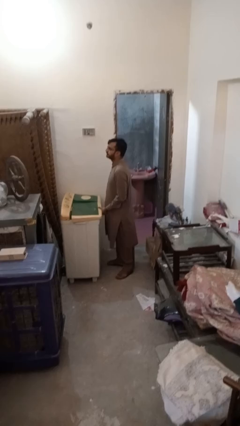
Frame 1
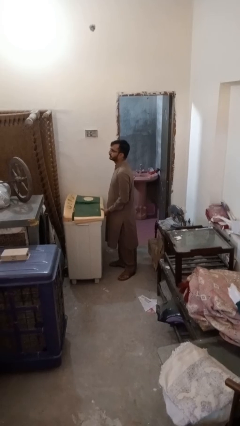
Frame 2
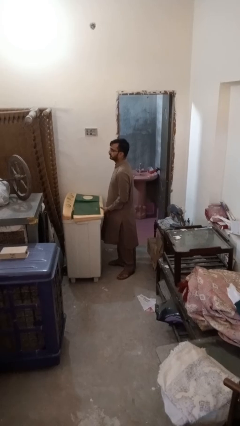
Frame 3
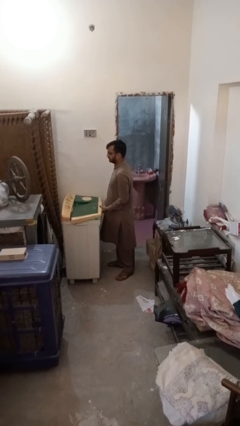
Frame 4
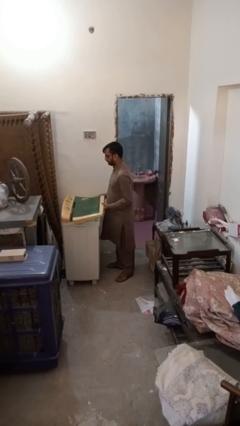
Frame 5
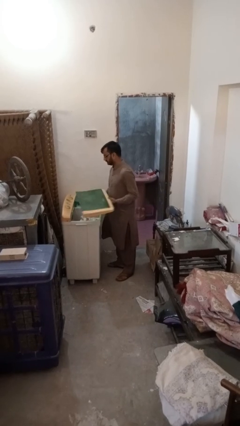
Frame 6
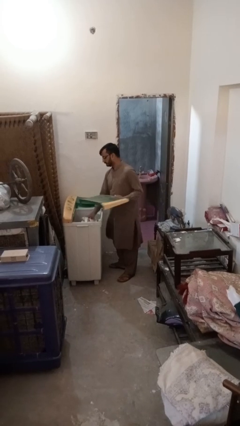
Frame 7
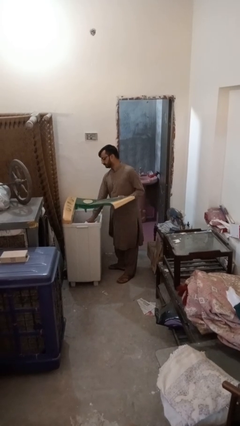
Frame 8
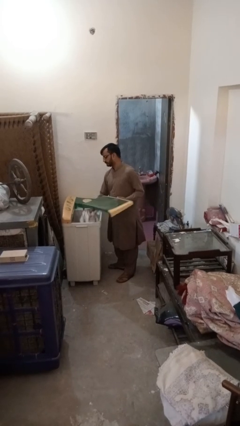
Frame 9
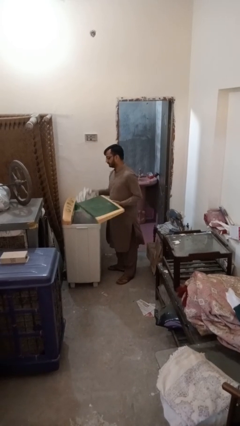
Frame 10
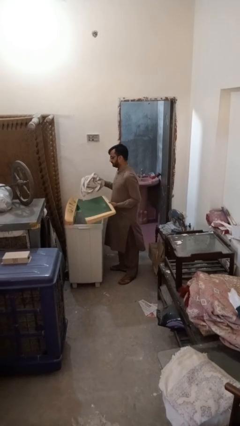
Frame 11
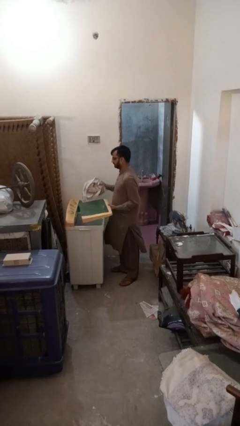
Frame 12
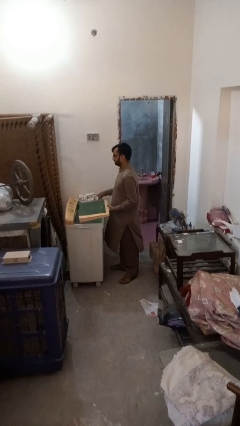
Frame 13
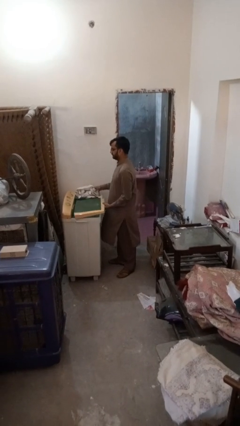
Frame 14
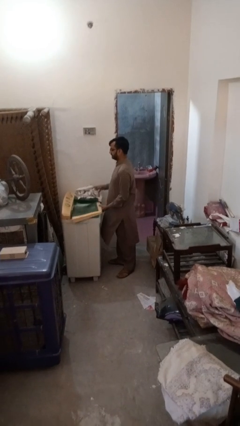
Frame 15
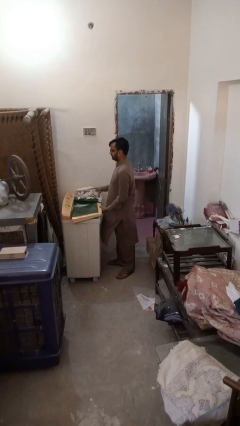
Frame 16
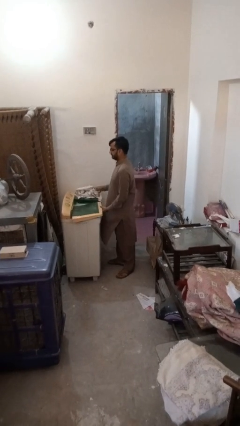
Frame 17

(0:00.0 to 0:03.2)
person unloads clotheswasher

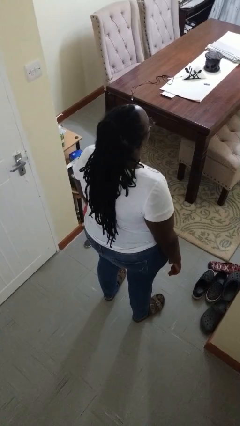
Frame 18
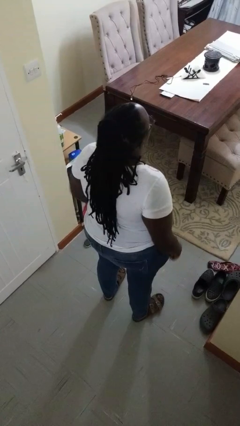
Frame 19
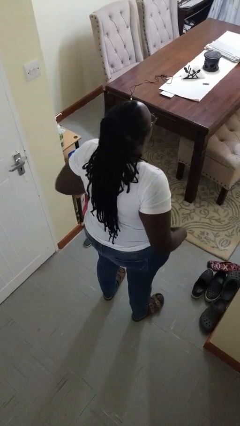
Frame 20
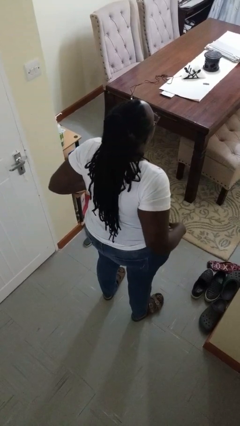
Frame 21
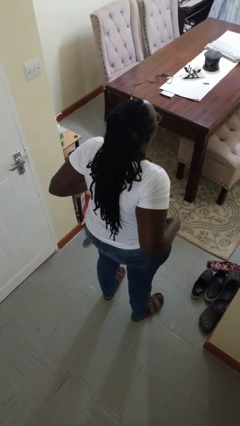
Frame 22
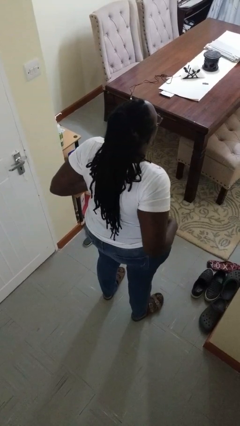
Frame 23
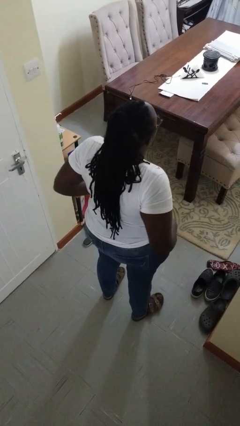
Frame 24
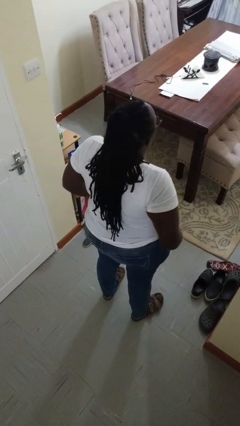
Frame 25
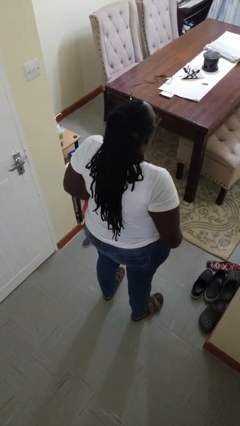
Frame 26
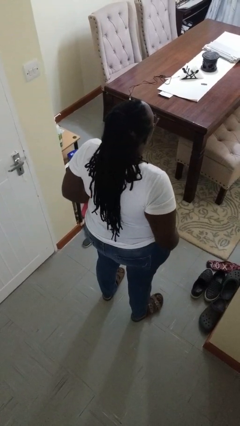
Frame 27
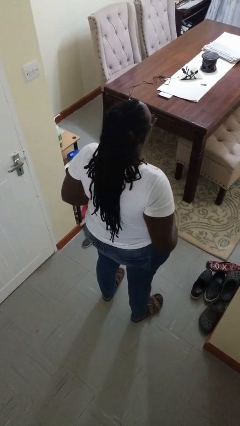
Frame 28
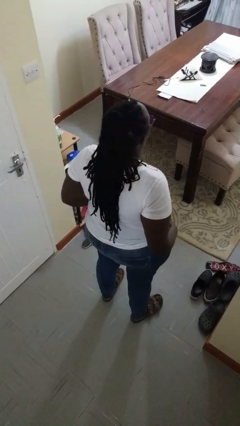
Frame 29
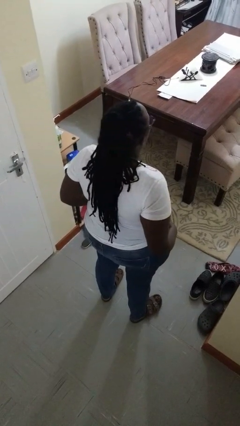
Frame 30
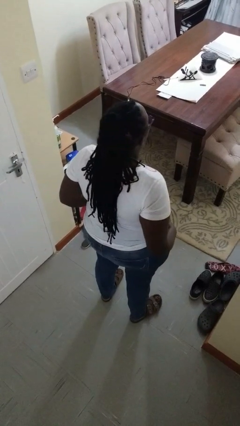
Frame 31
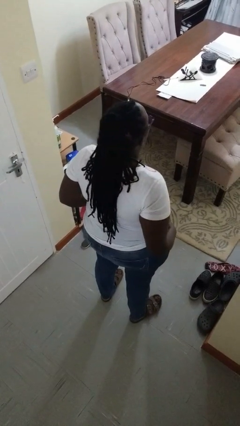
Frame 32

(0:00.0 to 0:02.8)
person puts hands in back pockets

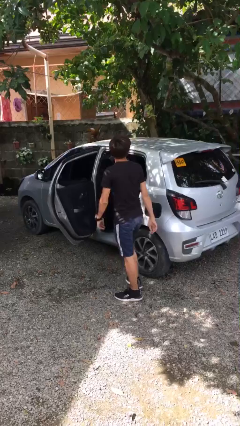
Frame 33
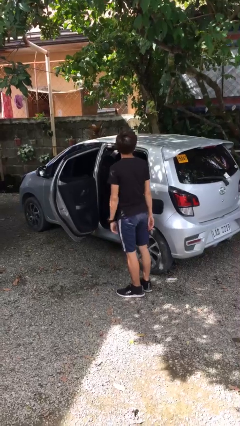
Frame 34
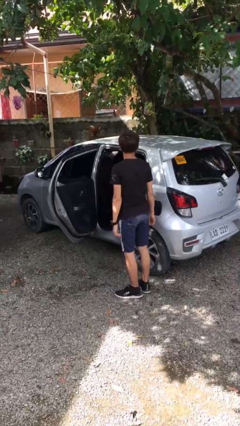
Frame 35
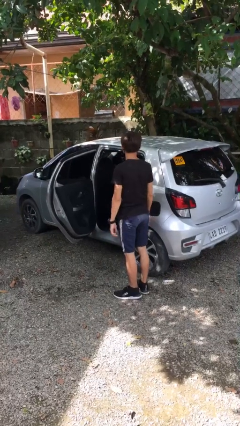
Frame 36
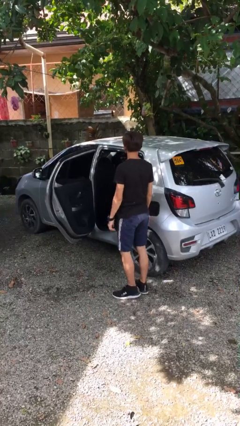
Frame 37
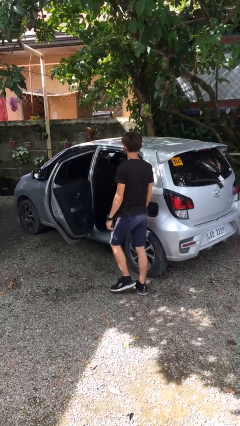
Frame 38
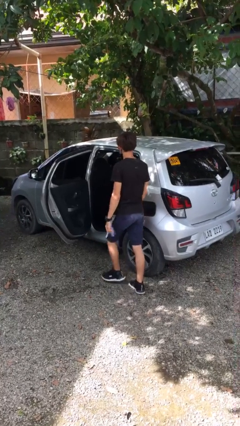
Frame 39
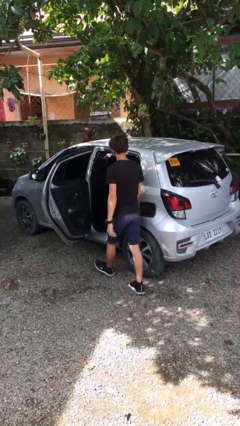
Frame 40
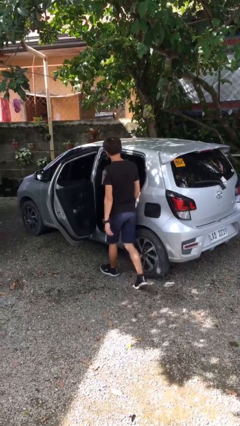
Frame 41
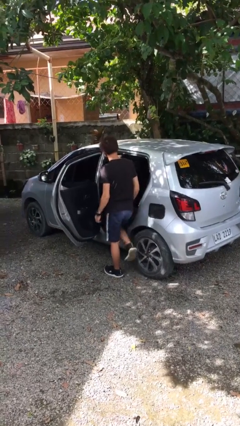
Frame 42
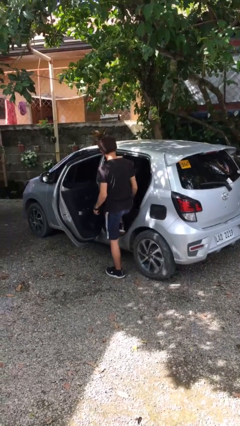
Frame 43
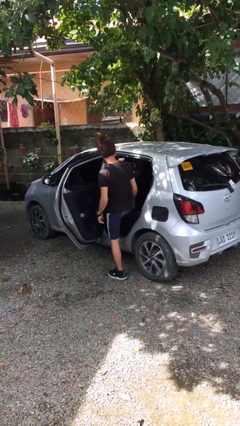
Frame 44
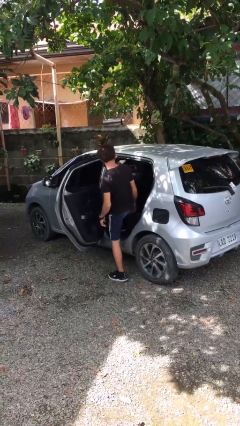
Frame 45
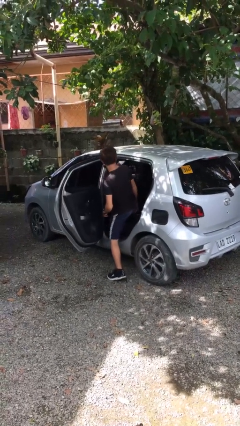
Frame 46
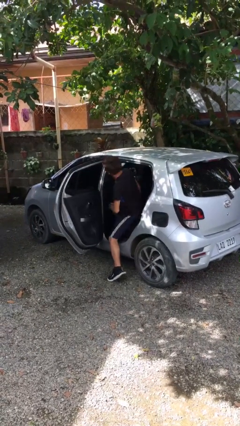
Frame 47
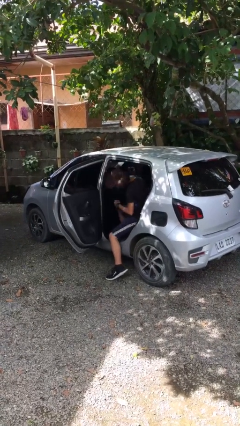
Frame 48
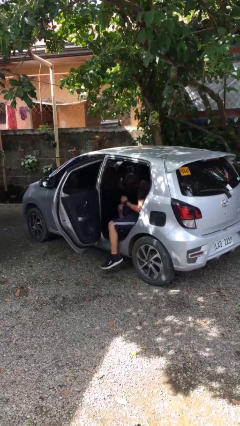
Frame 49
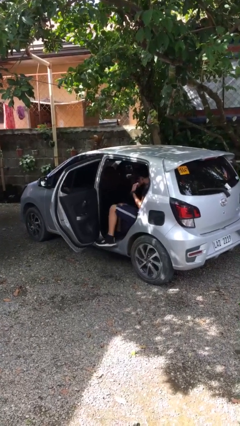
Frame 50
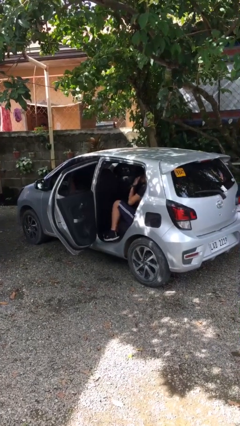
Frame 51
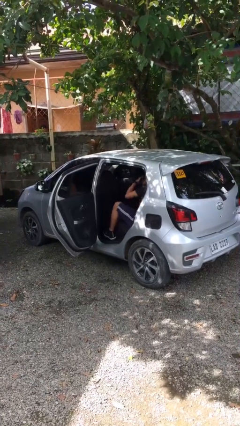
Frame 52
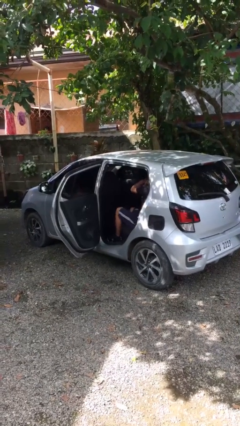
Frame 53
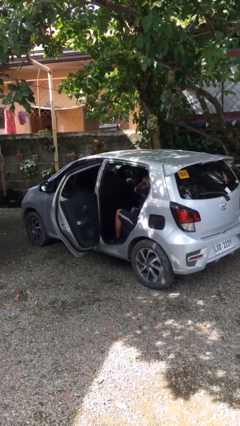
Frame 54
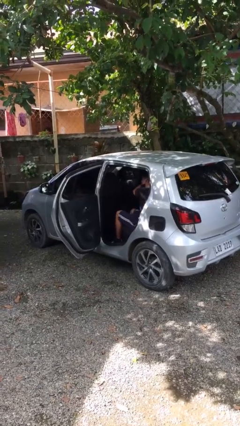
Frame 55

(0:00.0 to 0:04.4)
person enters car

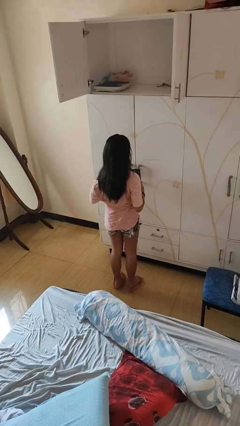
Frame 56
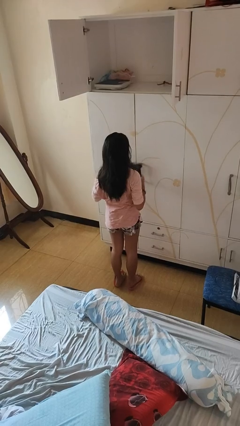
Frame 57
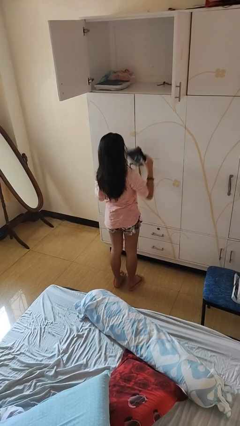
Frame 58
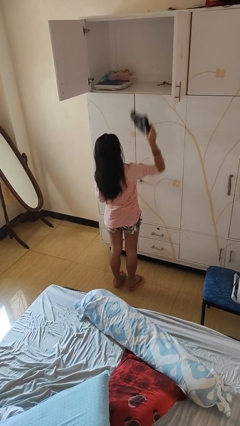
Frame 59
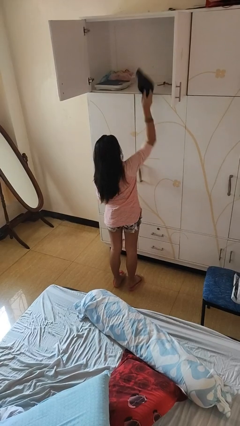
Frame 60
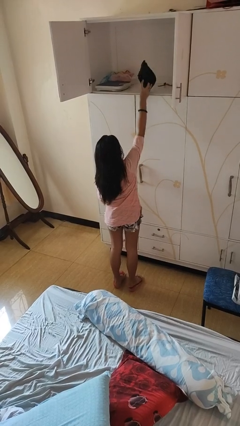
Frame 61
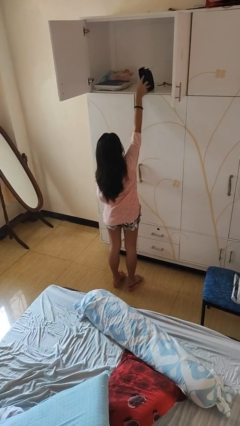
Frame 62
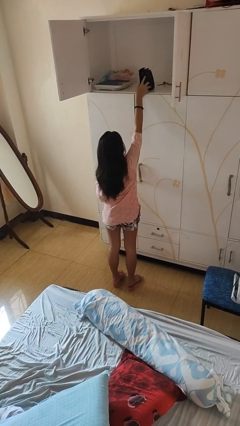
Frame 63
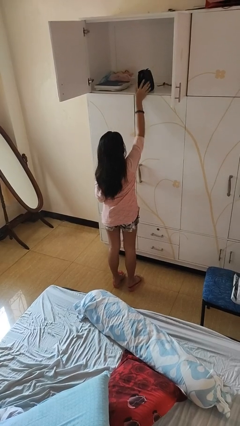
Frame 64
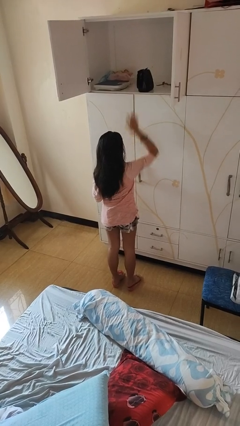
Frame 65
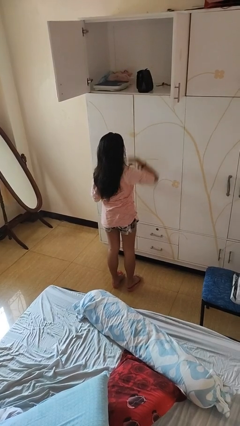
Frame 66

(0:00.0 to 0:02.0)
person puts down object on shelf

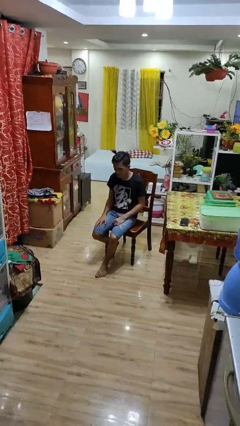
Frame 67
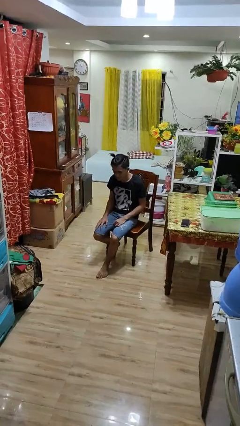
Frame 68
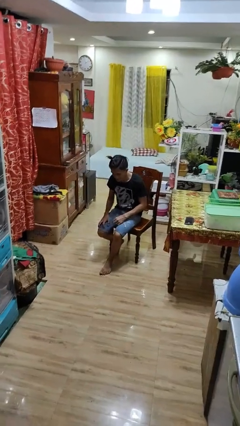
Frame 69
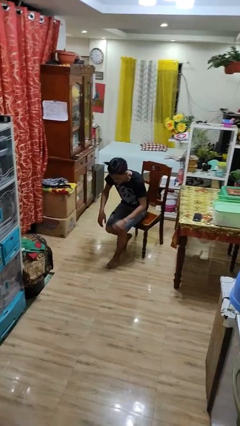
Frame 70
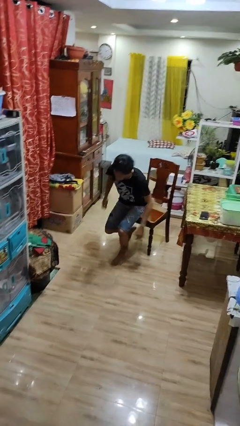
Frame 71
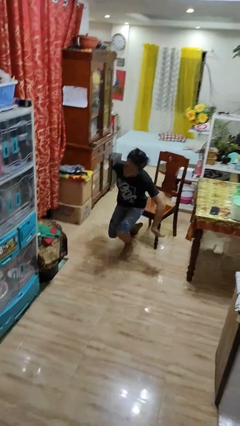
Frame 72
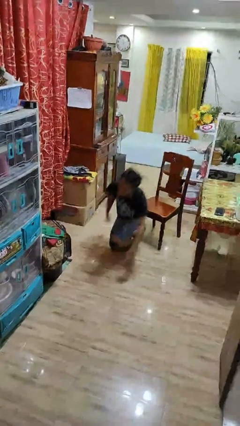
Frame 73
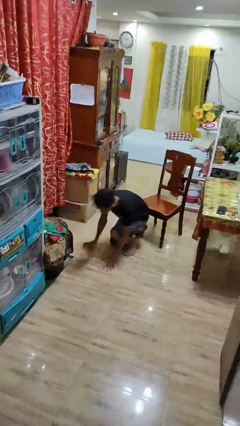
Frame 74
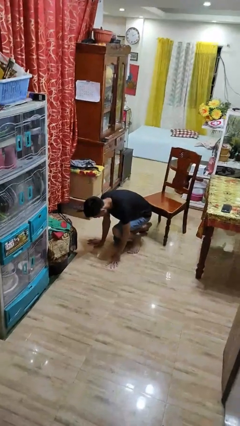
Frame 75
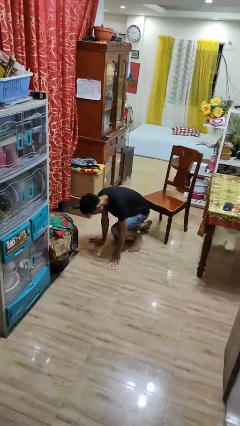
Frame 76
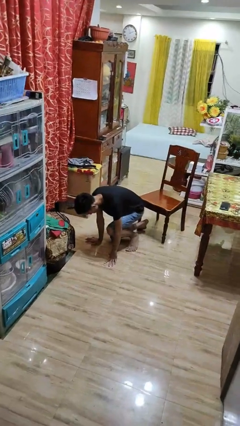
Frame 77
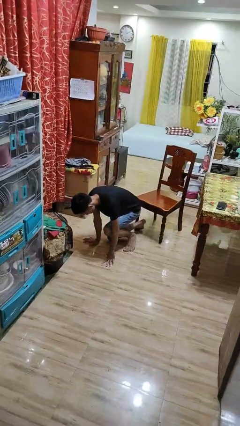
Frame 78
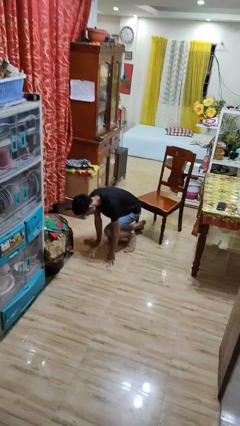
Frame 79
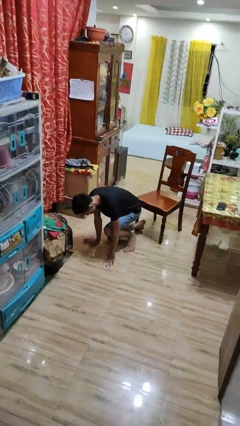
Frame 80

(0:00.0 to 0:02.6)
person falls from chair

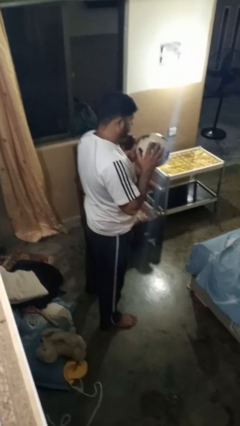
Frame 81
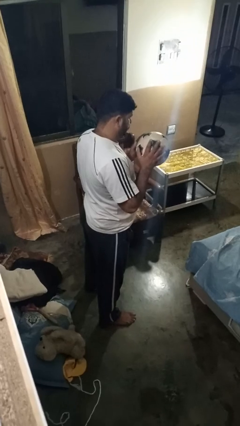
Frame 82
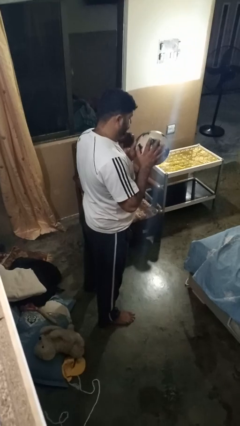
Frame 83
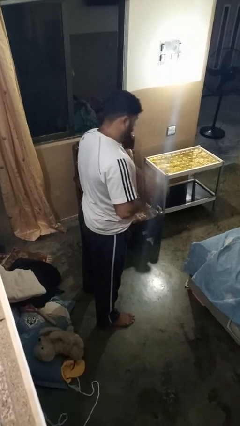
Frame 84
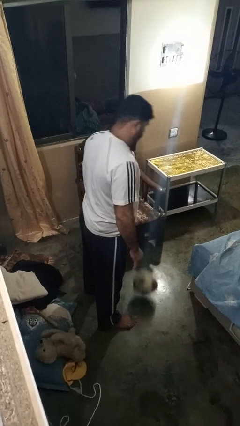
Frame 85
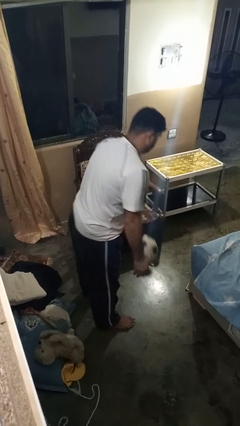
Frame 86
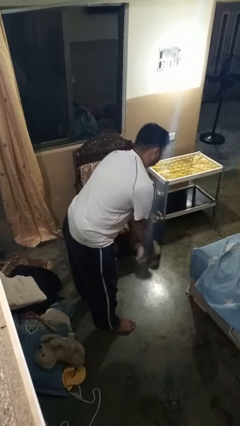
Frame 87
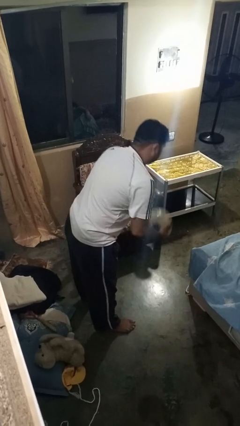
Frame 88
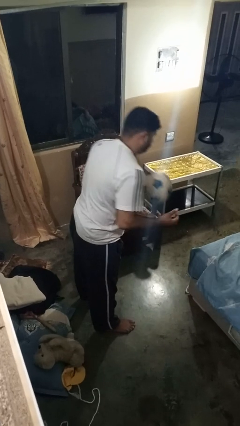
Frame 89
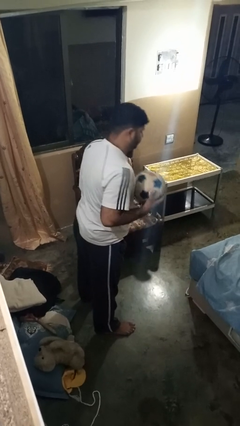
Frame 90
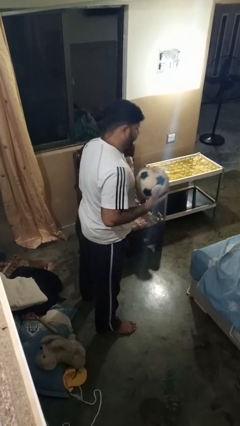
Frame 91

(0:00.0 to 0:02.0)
person bounces ball on floor

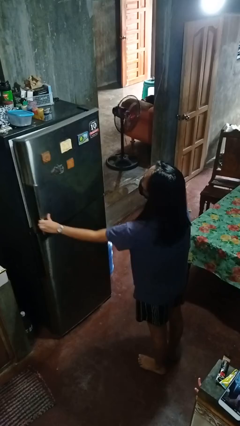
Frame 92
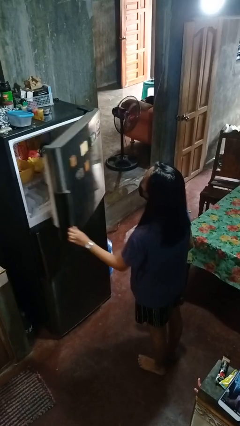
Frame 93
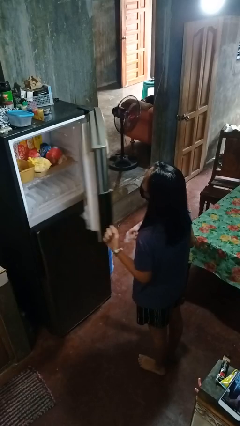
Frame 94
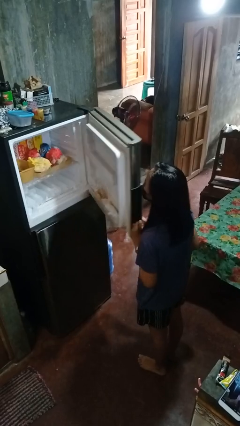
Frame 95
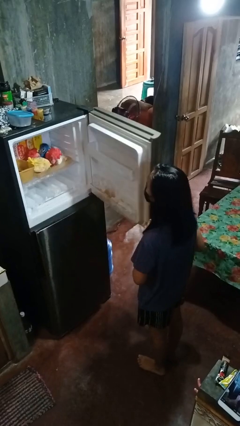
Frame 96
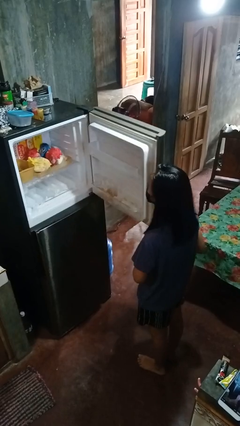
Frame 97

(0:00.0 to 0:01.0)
person opens refrigerator
